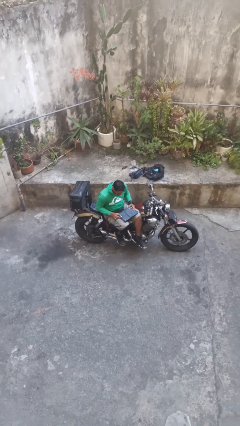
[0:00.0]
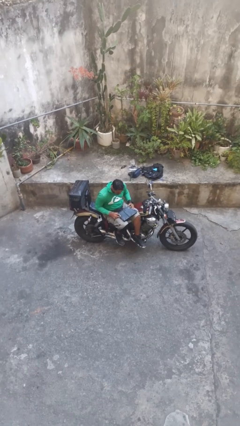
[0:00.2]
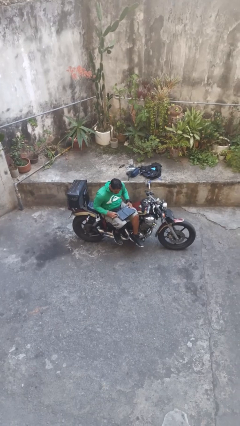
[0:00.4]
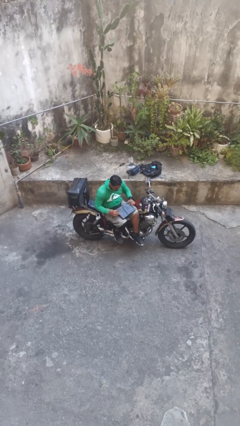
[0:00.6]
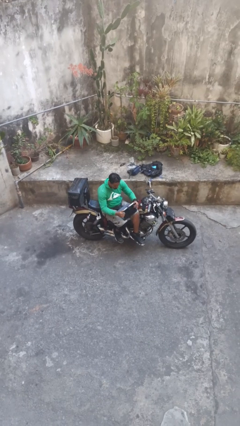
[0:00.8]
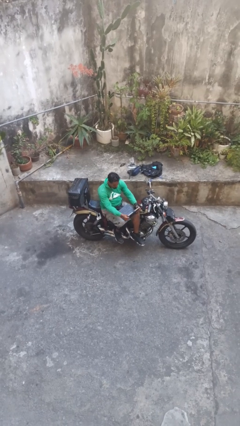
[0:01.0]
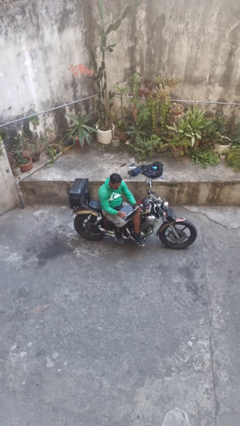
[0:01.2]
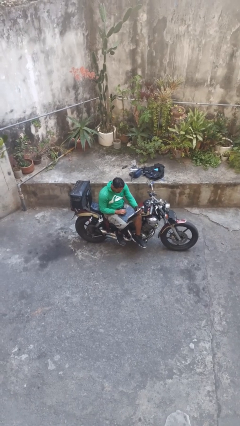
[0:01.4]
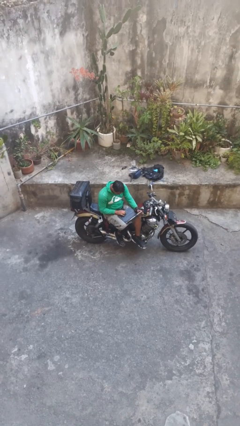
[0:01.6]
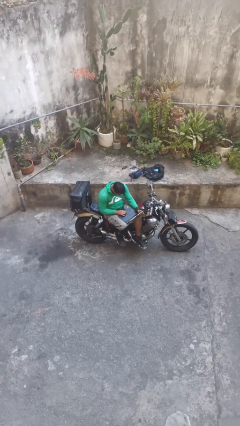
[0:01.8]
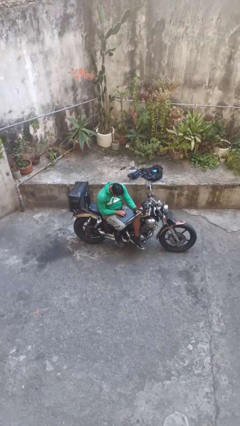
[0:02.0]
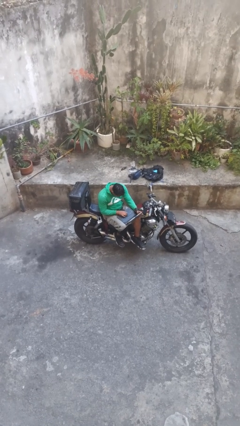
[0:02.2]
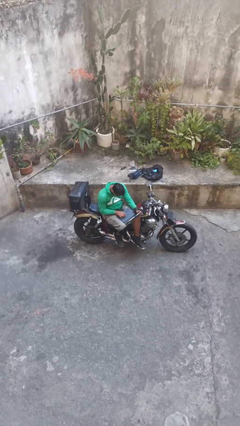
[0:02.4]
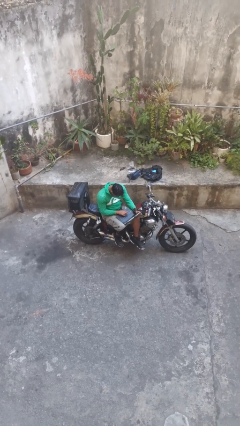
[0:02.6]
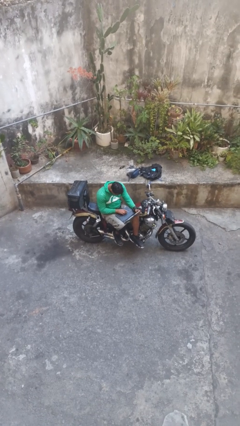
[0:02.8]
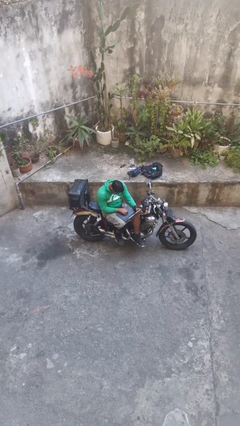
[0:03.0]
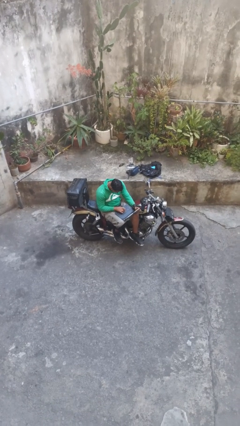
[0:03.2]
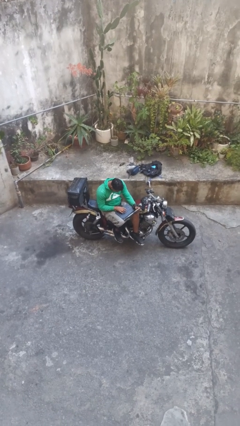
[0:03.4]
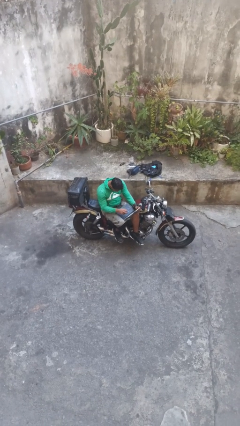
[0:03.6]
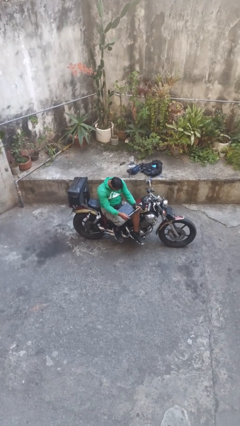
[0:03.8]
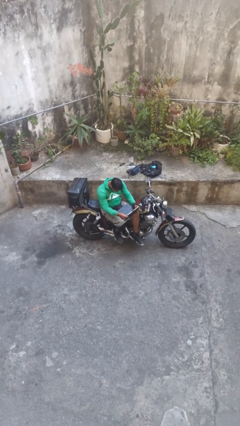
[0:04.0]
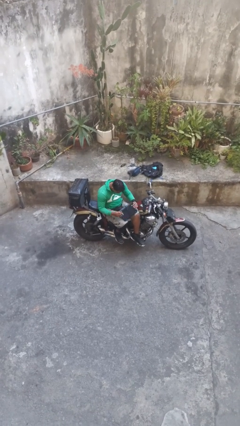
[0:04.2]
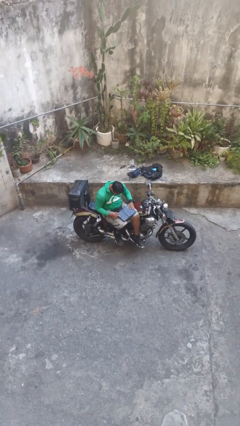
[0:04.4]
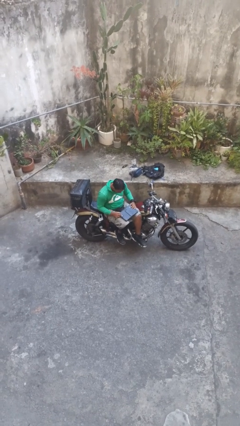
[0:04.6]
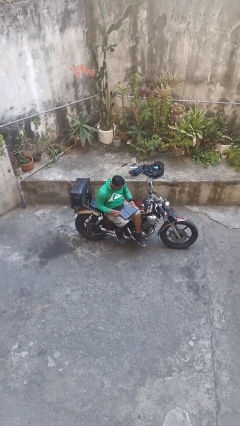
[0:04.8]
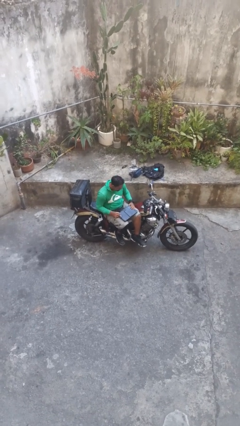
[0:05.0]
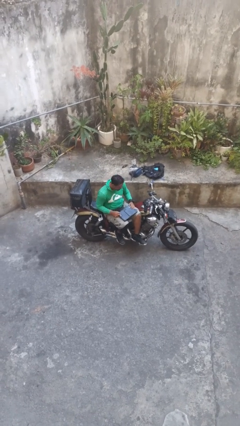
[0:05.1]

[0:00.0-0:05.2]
person interacts with laptop

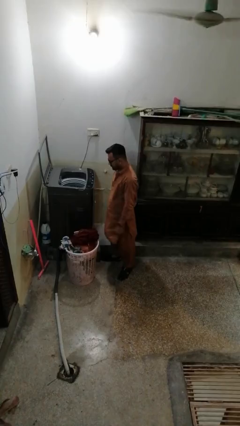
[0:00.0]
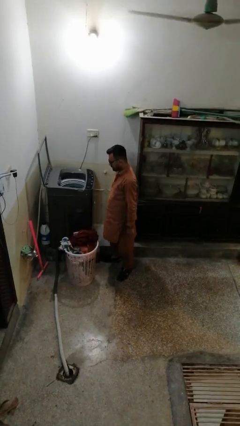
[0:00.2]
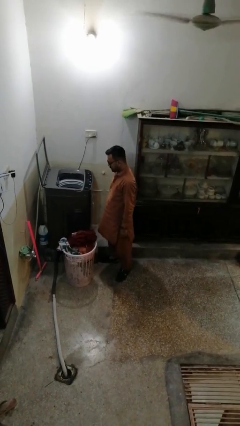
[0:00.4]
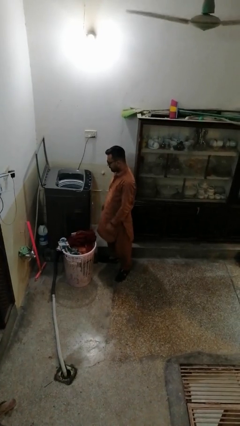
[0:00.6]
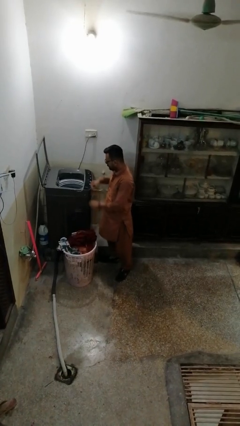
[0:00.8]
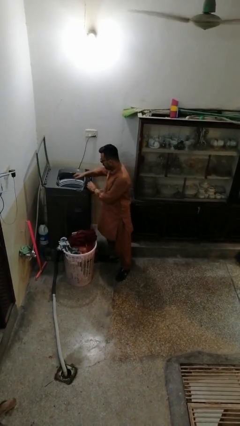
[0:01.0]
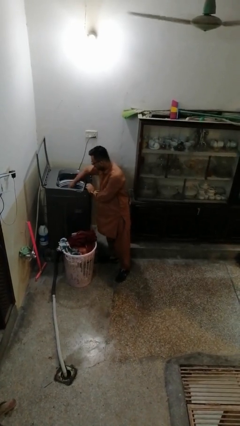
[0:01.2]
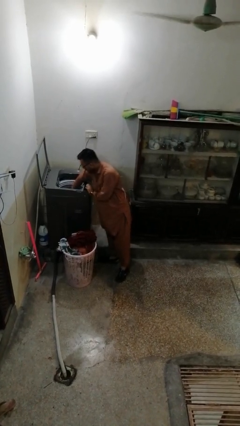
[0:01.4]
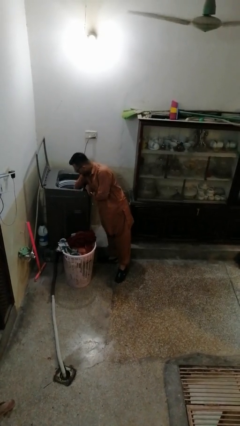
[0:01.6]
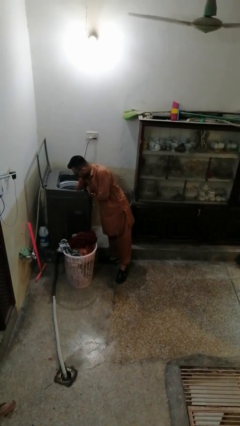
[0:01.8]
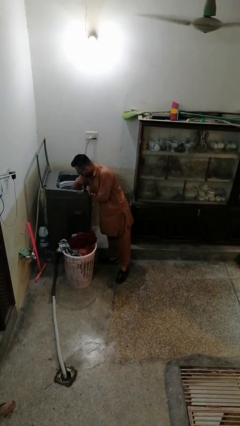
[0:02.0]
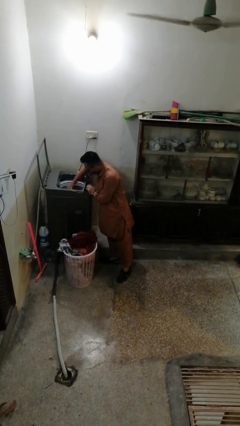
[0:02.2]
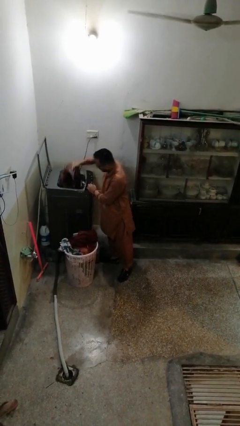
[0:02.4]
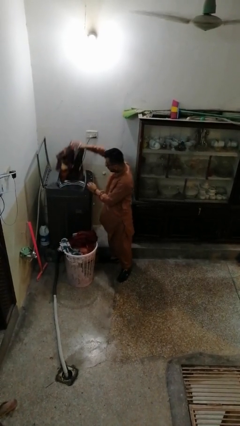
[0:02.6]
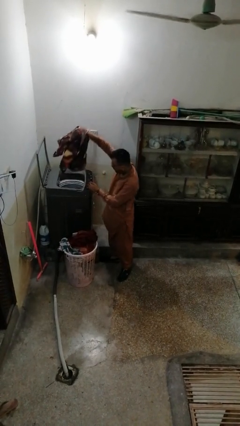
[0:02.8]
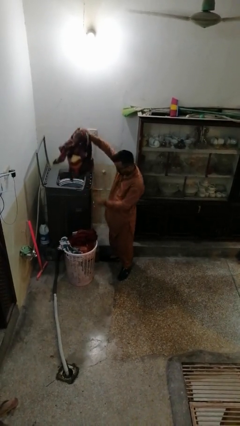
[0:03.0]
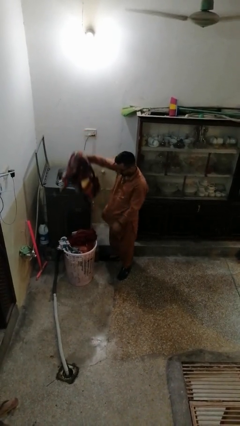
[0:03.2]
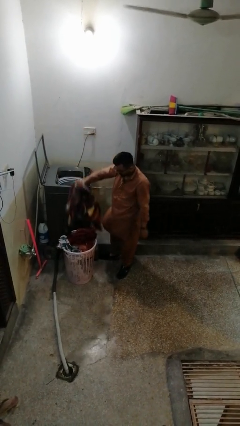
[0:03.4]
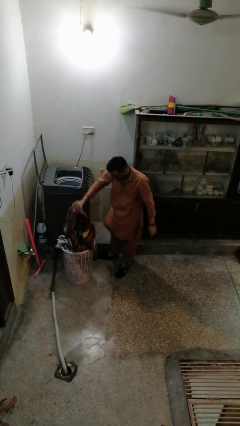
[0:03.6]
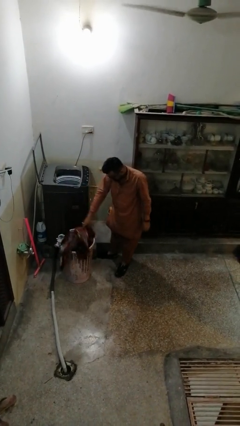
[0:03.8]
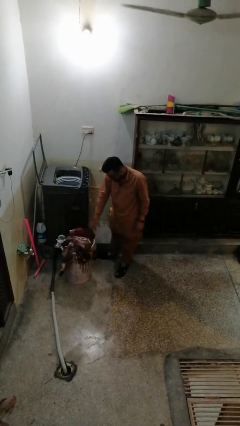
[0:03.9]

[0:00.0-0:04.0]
person unloads dryer

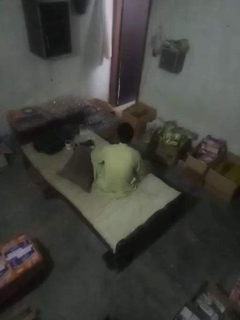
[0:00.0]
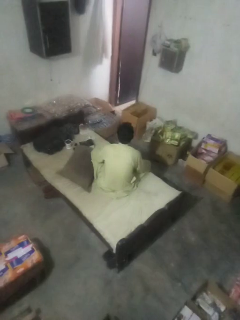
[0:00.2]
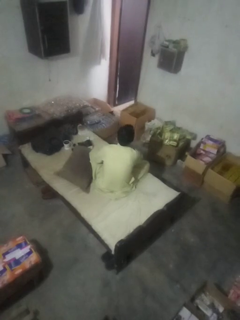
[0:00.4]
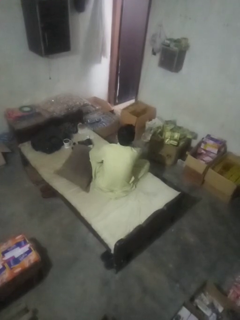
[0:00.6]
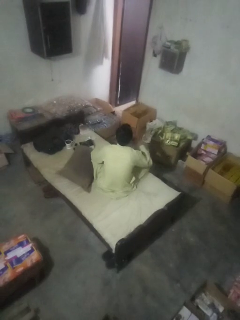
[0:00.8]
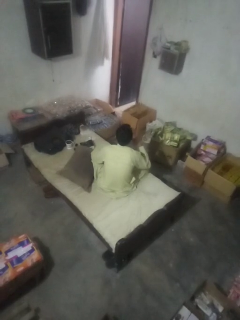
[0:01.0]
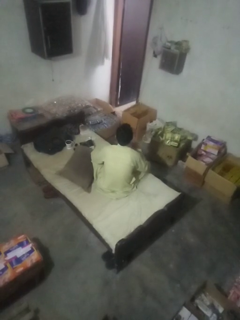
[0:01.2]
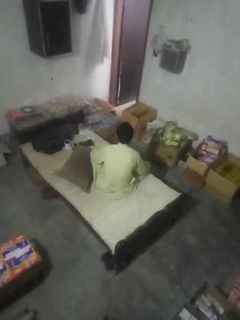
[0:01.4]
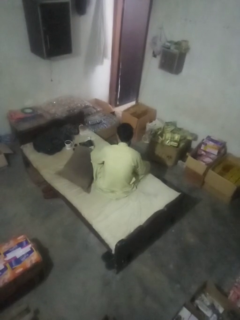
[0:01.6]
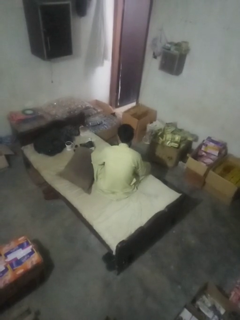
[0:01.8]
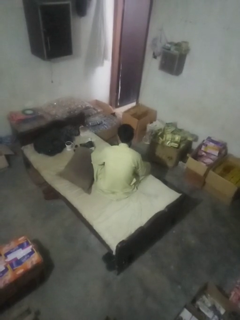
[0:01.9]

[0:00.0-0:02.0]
person gestures cut

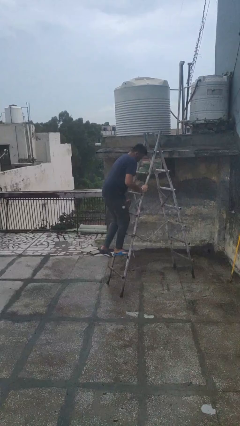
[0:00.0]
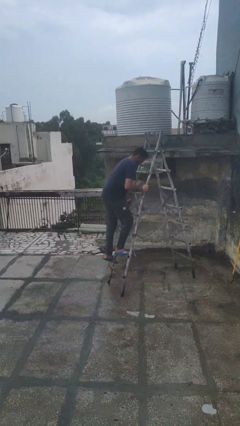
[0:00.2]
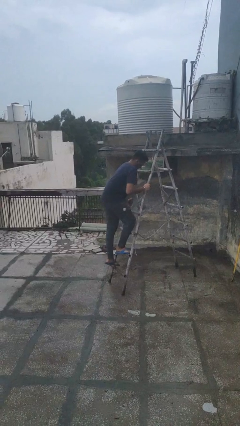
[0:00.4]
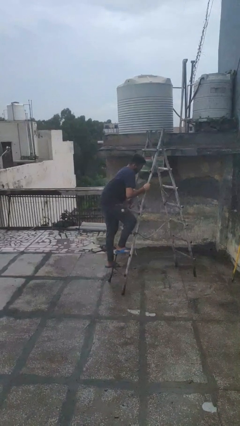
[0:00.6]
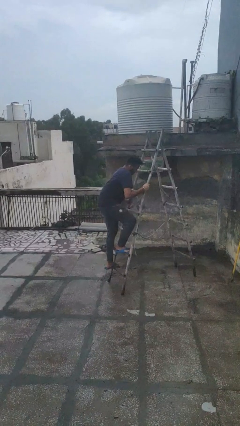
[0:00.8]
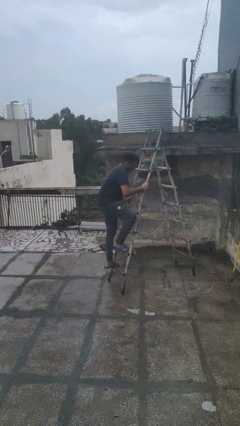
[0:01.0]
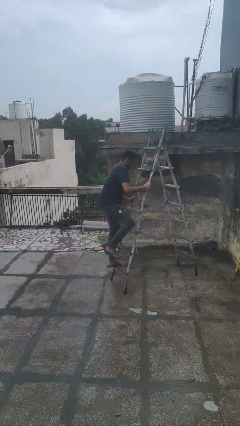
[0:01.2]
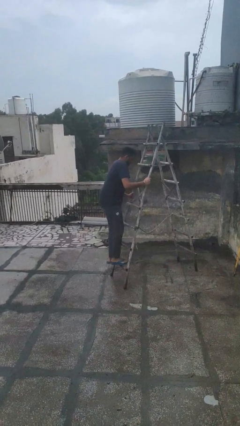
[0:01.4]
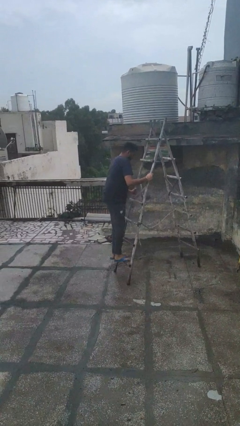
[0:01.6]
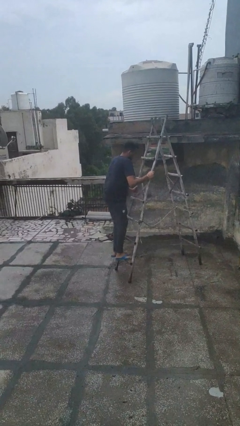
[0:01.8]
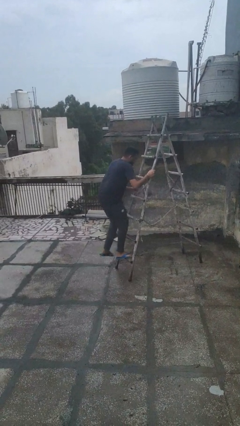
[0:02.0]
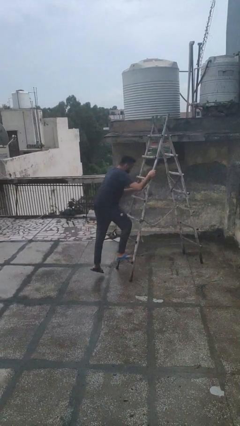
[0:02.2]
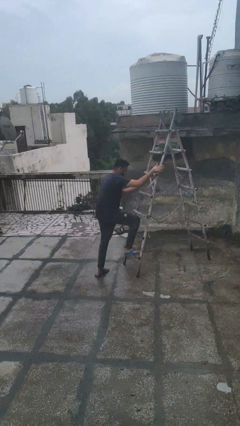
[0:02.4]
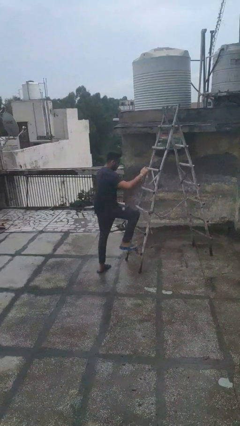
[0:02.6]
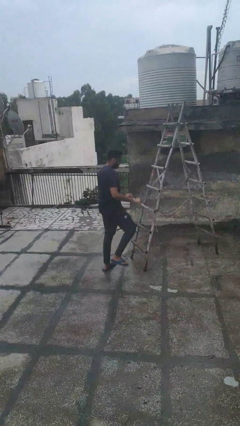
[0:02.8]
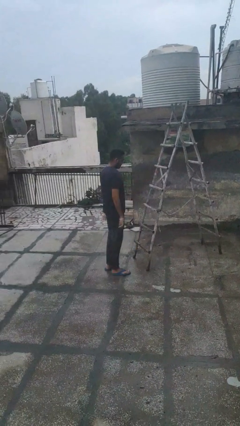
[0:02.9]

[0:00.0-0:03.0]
person climbs down ladder

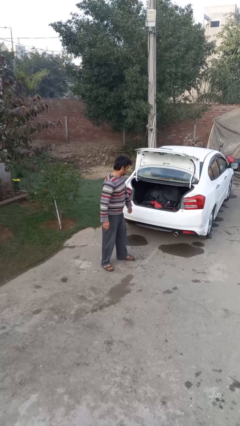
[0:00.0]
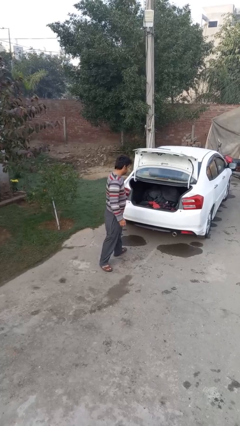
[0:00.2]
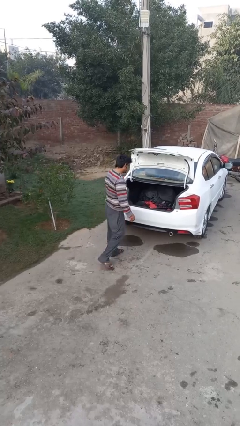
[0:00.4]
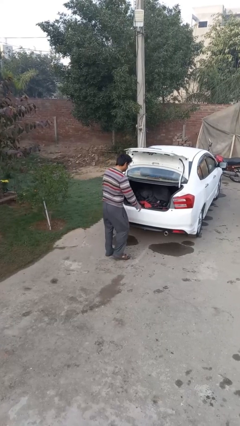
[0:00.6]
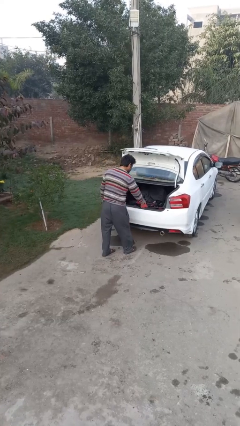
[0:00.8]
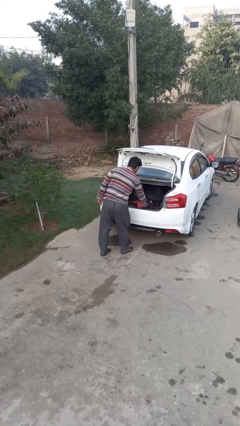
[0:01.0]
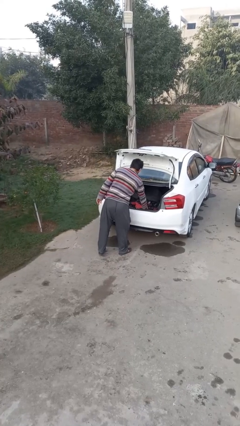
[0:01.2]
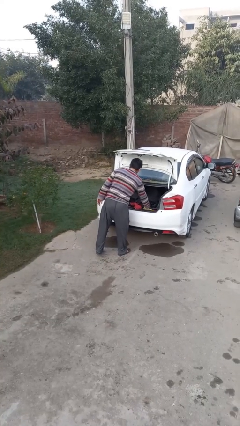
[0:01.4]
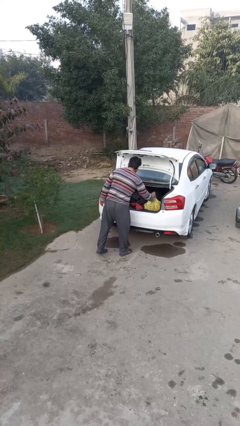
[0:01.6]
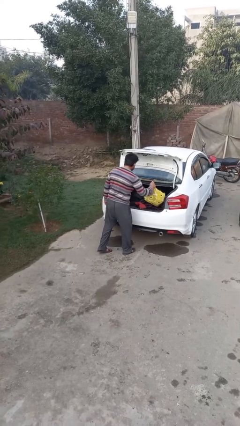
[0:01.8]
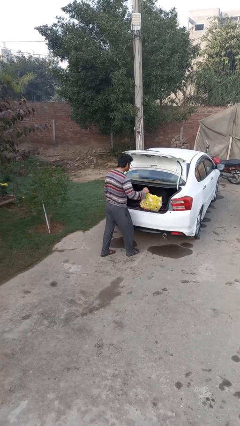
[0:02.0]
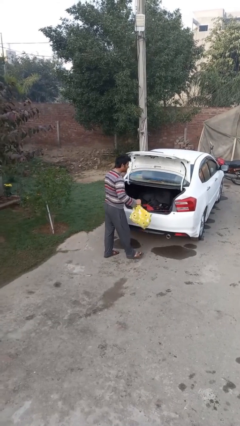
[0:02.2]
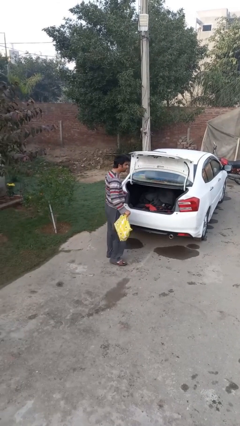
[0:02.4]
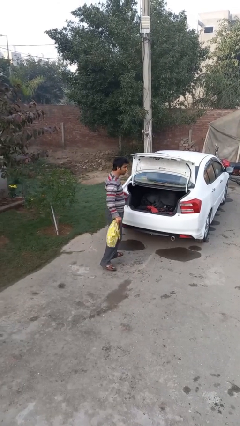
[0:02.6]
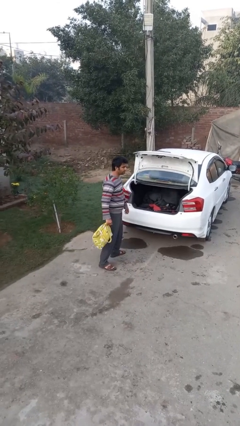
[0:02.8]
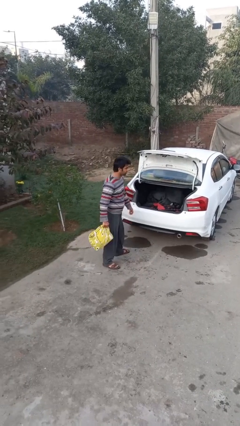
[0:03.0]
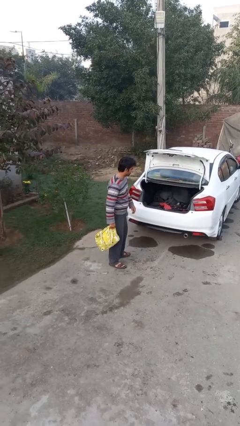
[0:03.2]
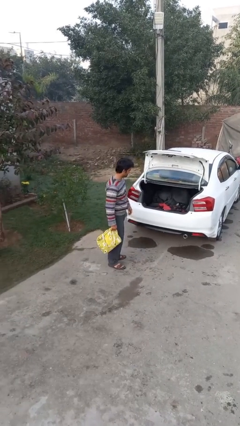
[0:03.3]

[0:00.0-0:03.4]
person unloads car

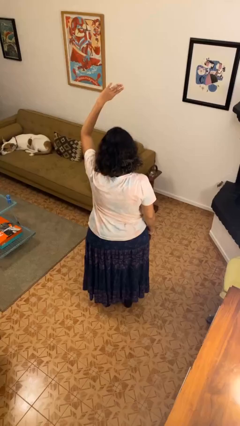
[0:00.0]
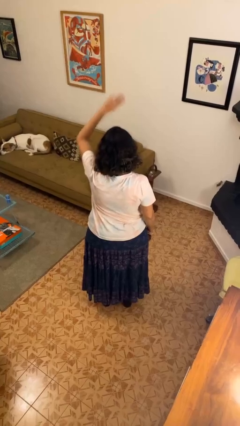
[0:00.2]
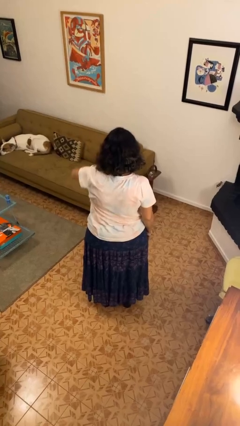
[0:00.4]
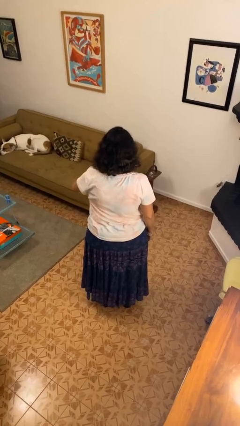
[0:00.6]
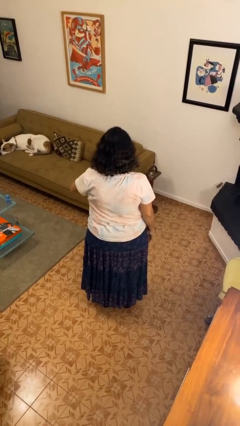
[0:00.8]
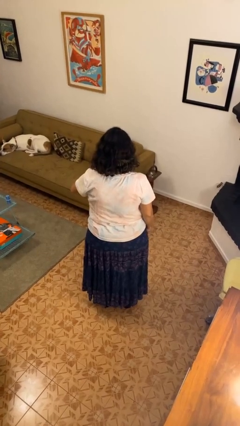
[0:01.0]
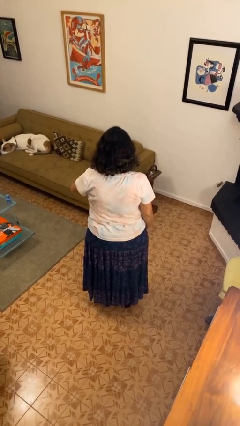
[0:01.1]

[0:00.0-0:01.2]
person gestures swipe down
